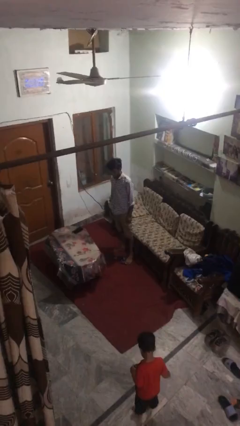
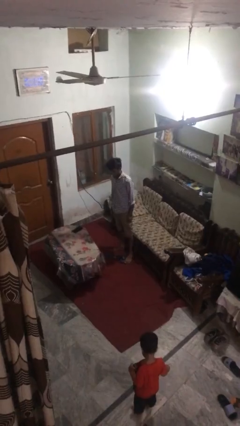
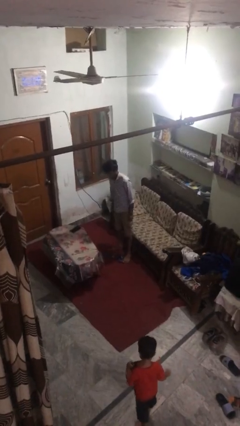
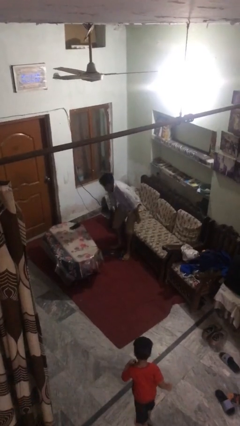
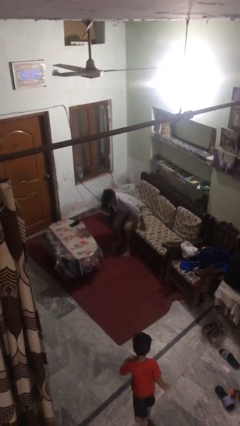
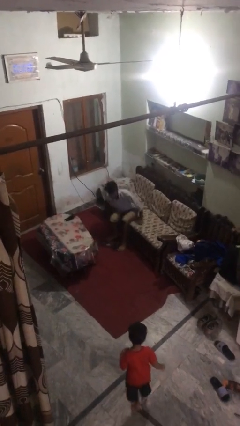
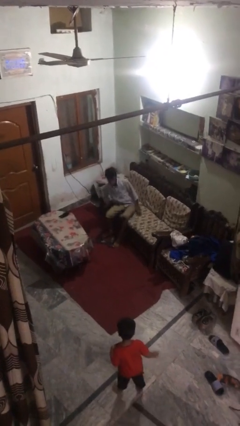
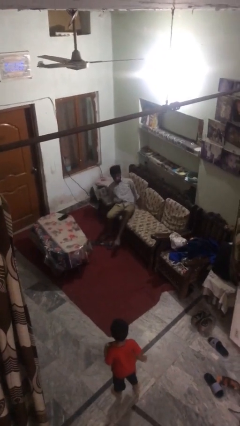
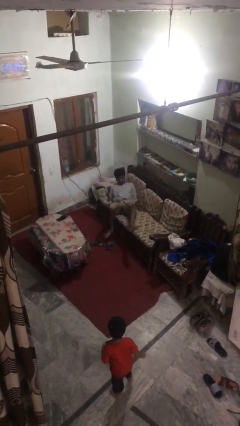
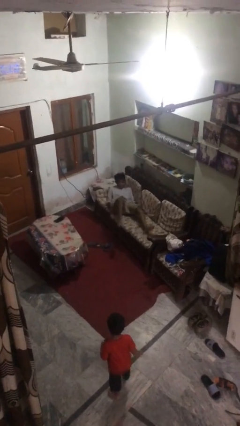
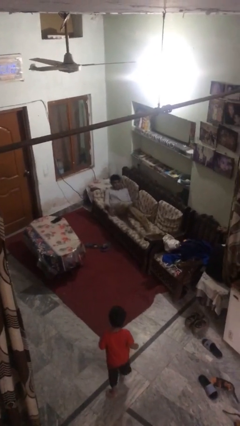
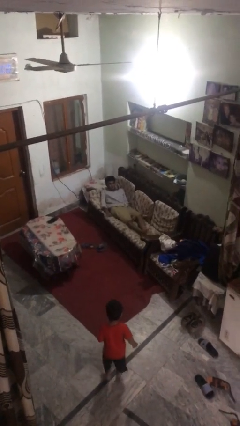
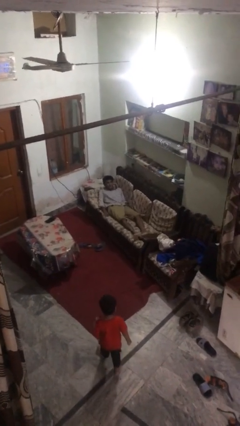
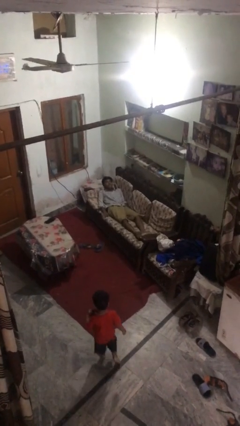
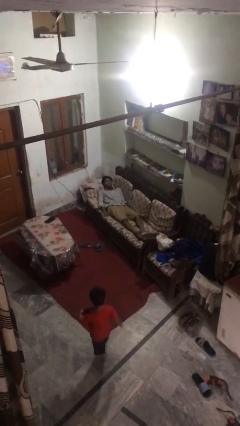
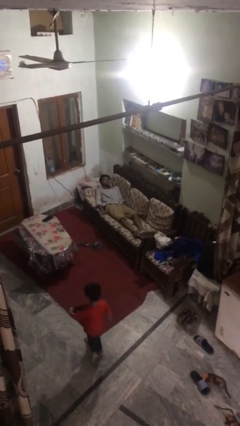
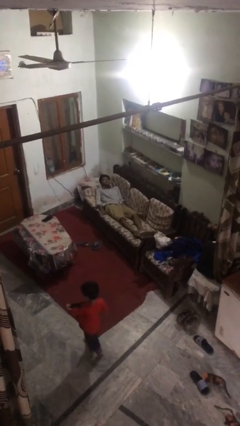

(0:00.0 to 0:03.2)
person lies down on couch

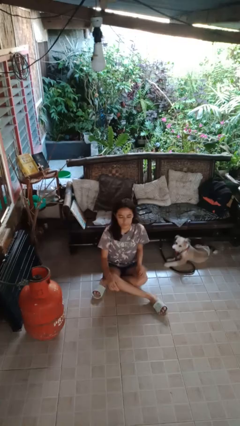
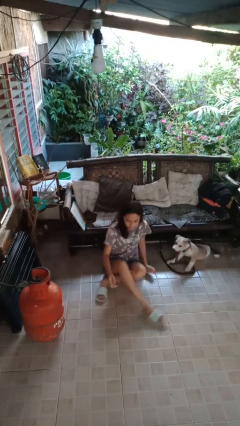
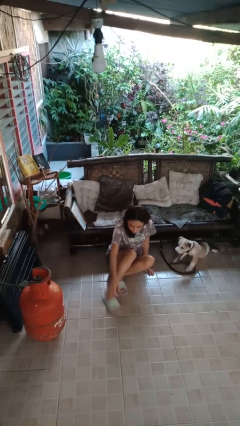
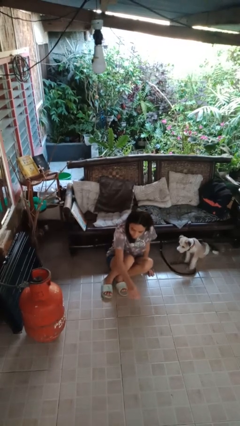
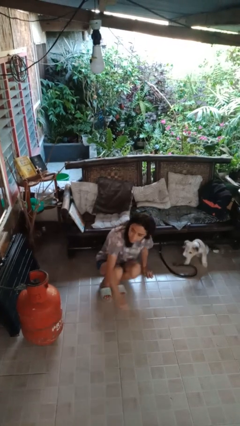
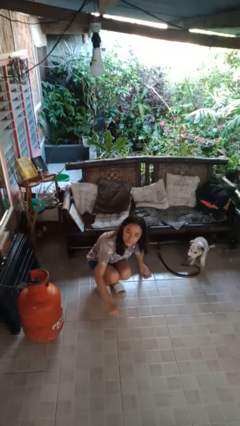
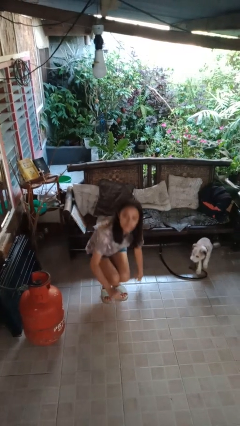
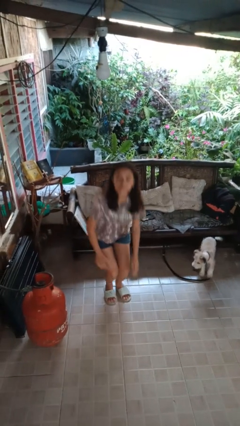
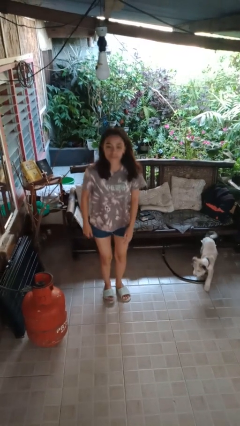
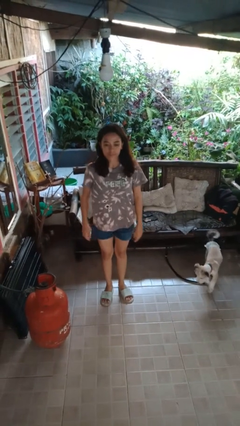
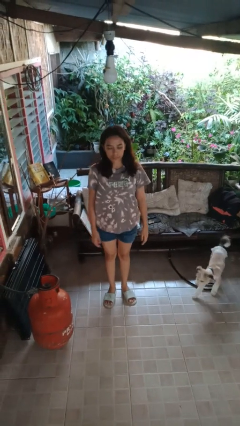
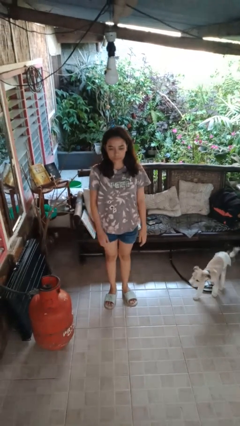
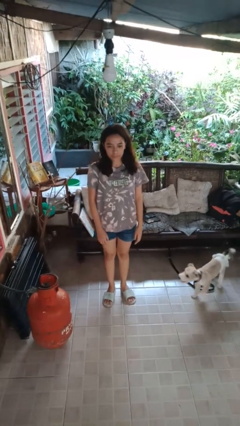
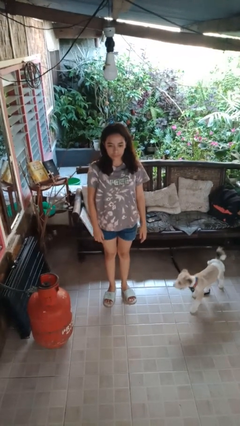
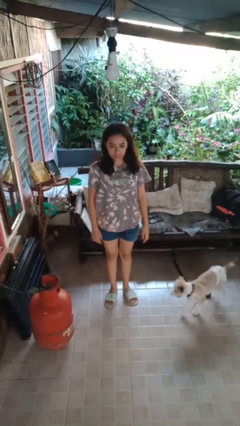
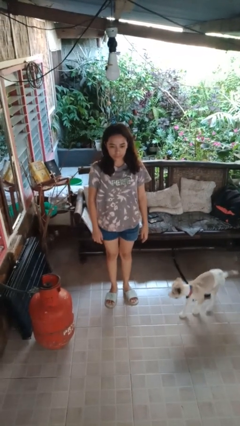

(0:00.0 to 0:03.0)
person stands up from floor

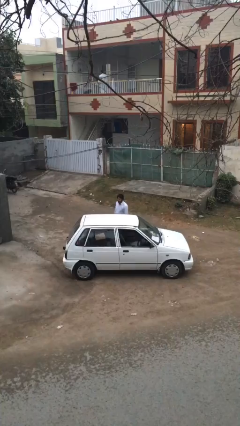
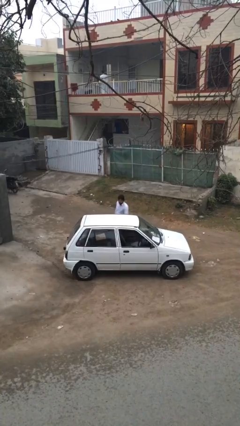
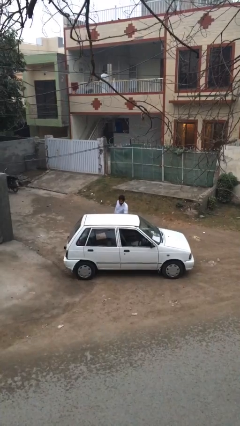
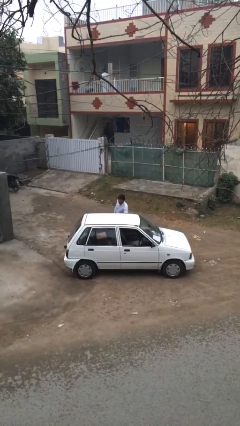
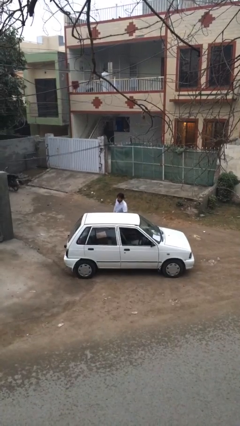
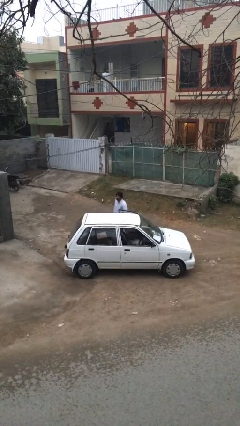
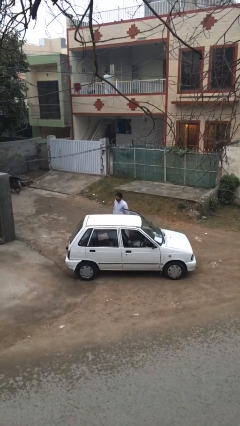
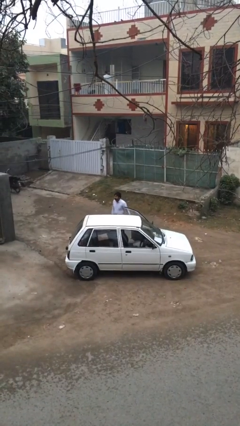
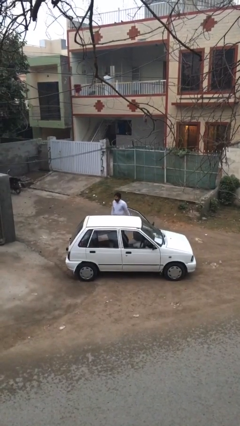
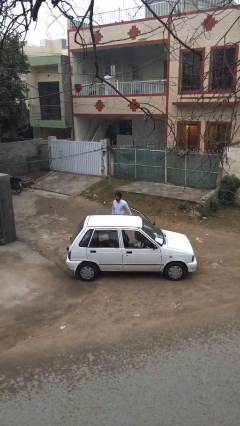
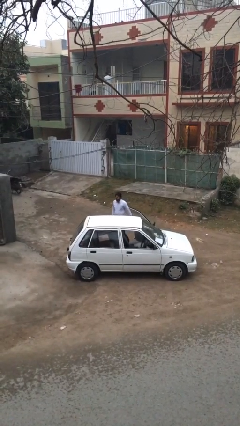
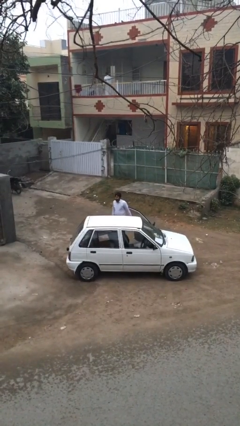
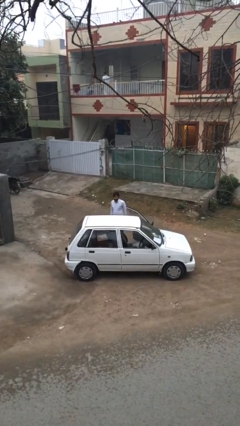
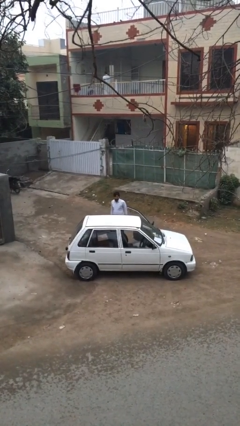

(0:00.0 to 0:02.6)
person opens car door

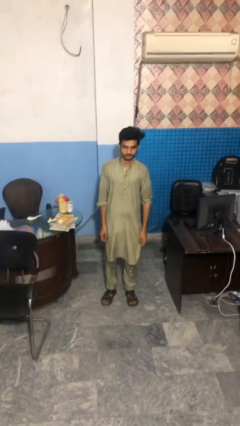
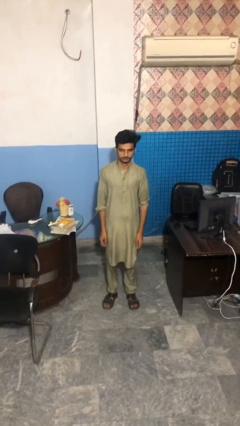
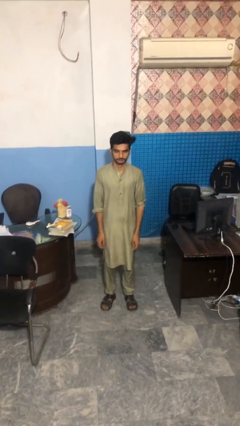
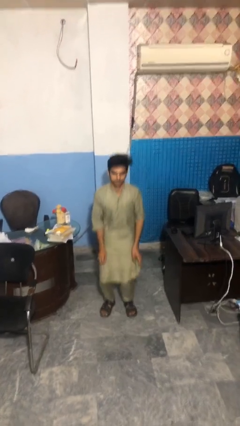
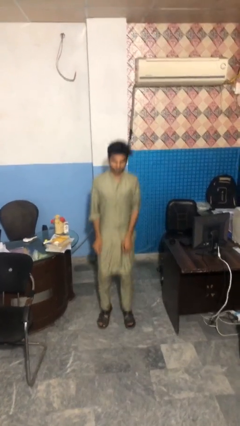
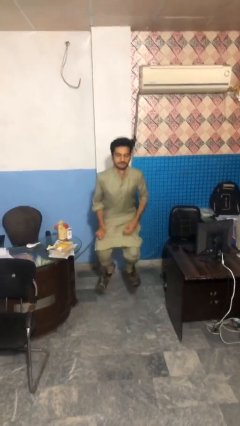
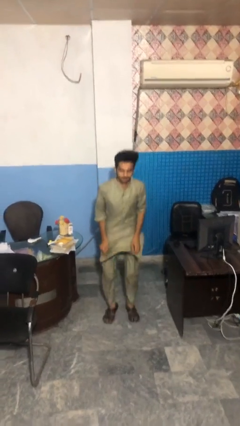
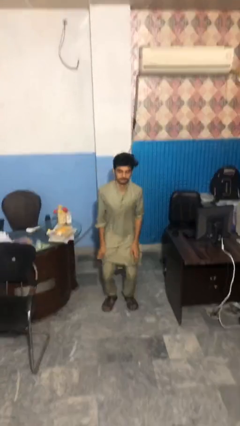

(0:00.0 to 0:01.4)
person jumps

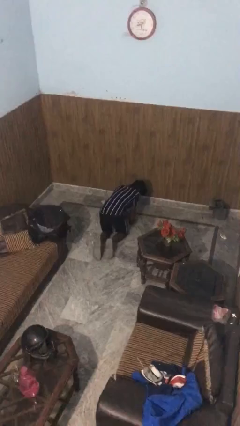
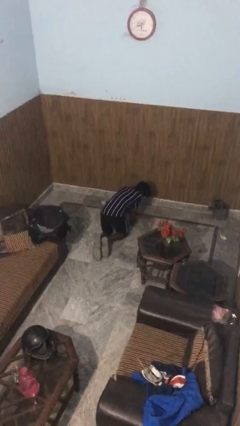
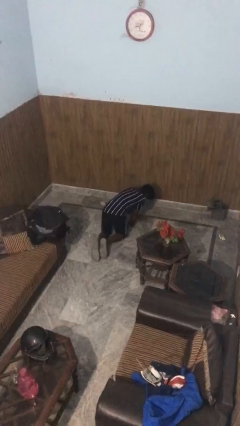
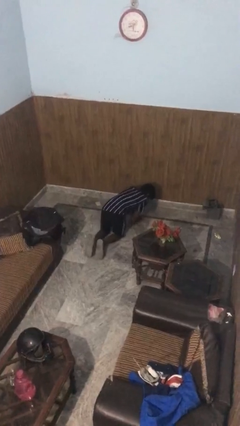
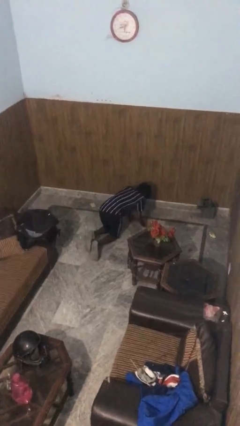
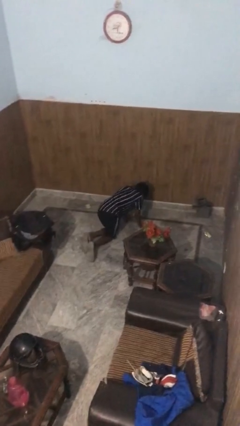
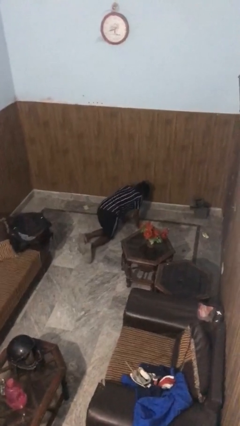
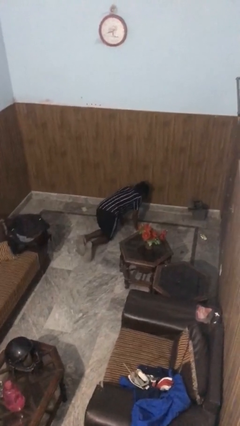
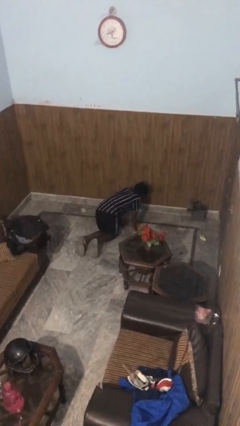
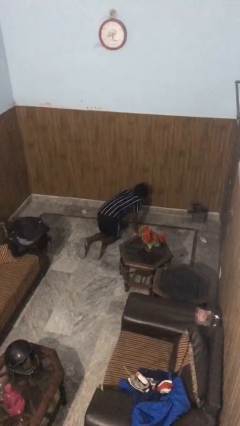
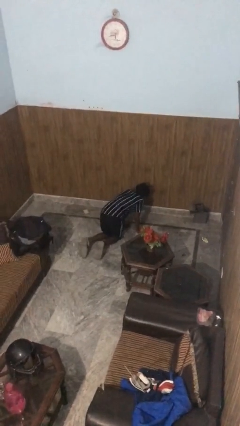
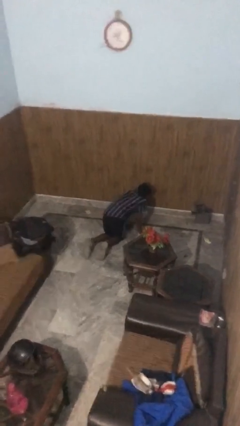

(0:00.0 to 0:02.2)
person crawls

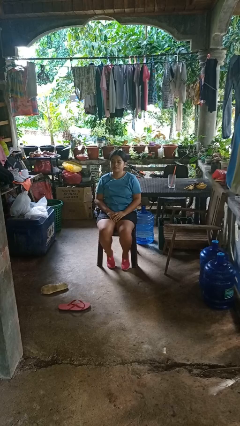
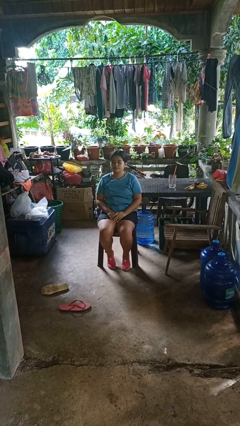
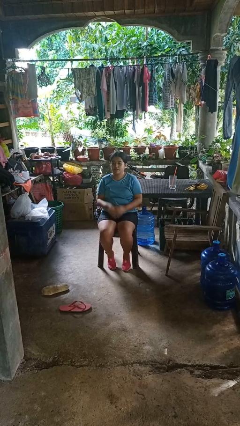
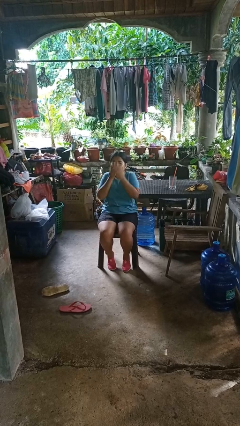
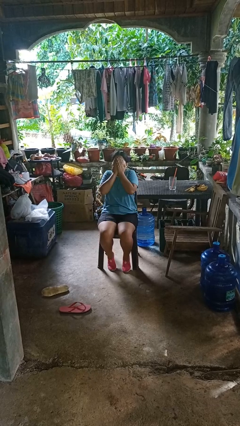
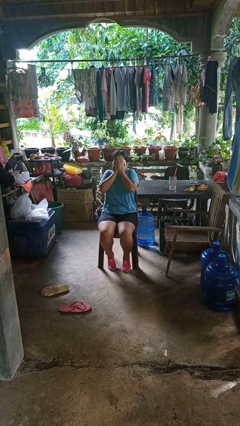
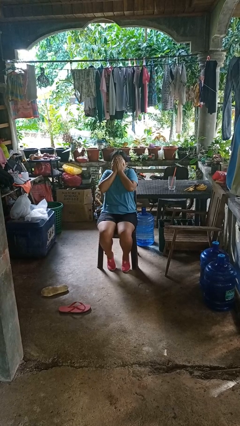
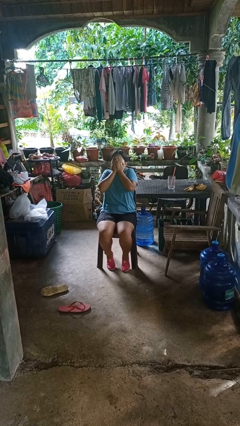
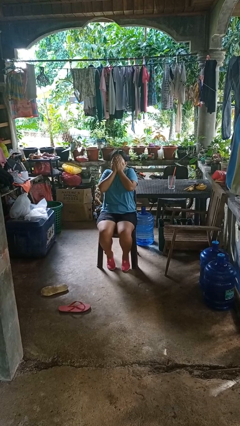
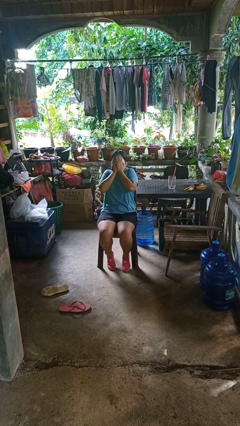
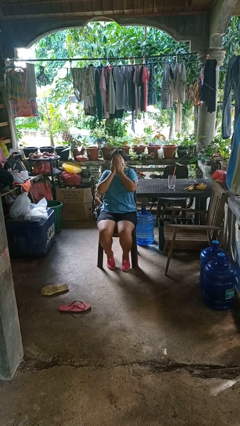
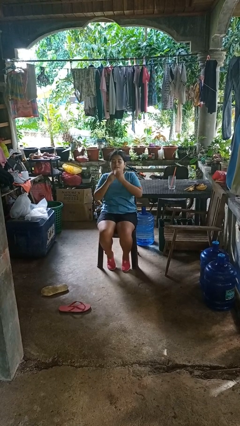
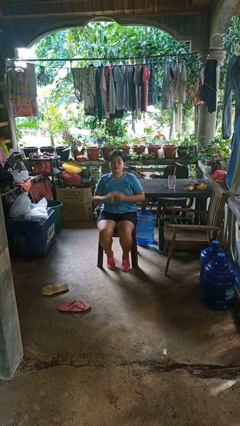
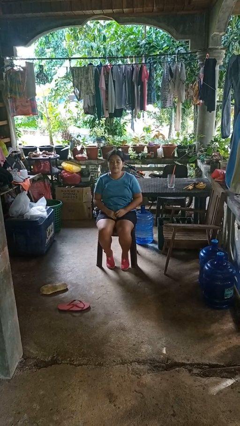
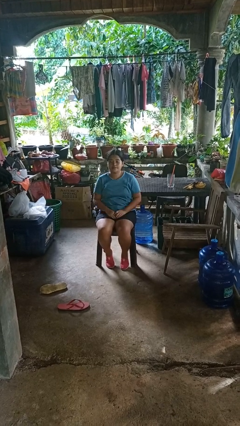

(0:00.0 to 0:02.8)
person covers face with hands

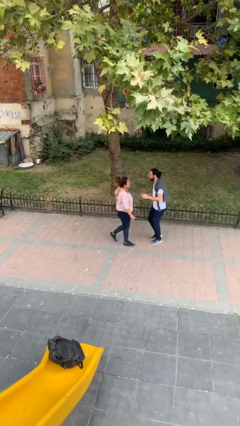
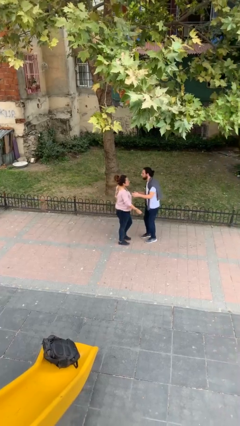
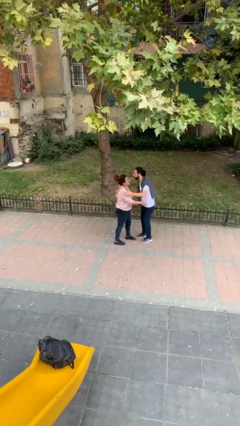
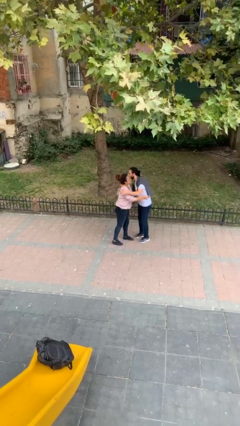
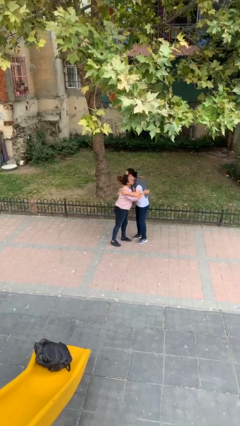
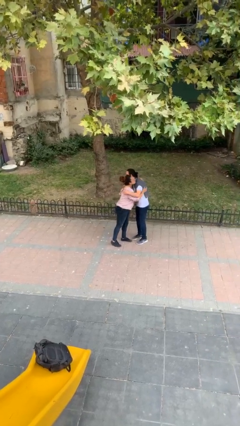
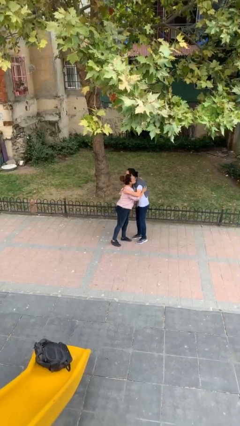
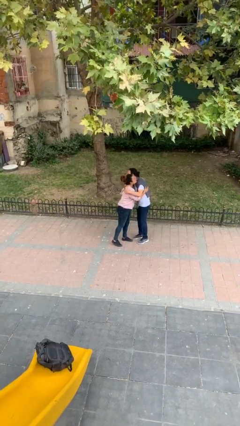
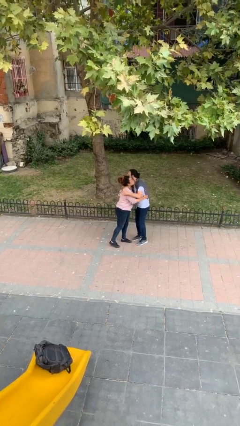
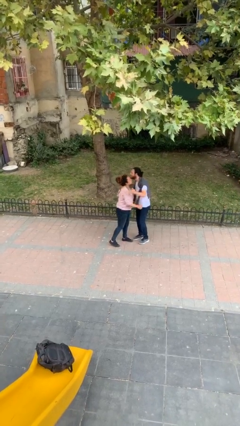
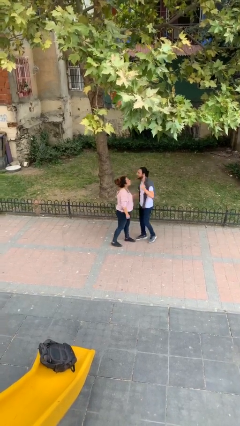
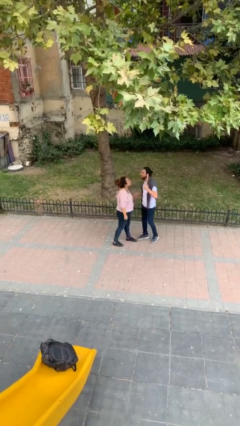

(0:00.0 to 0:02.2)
person embraces person
